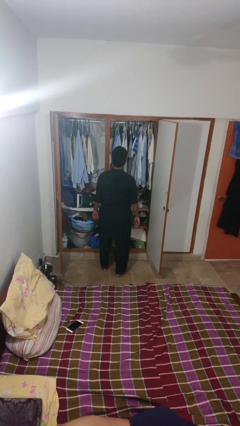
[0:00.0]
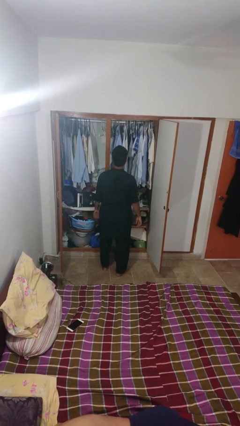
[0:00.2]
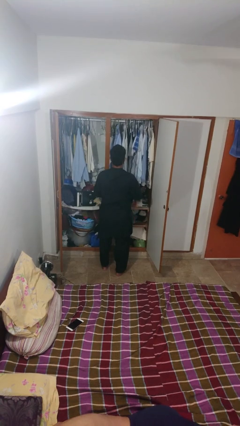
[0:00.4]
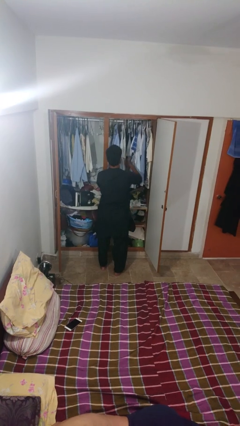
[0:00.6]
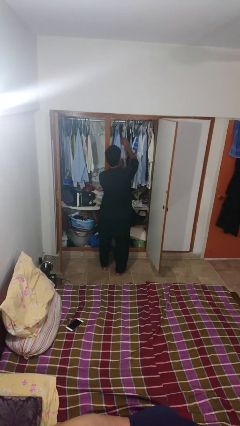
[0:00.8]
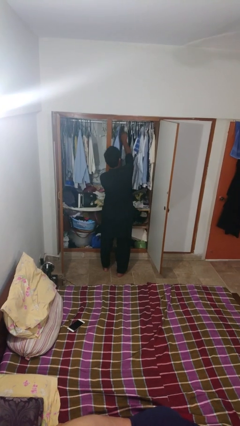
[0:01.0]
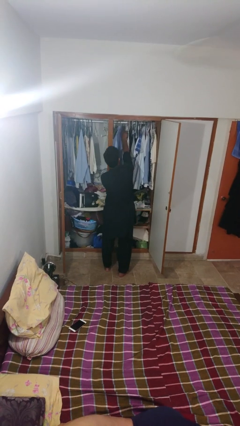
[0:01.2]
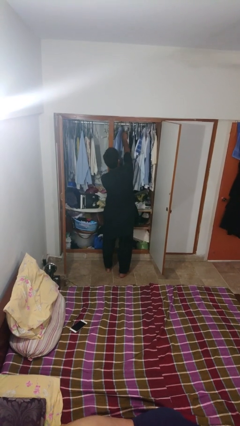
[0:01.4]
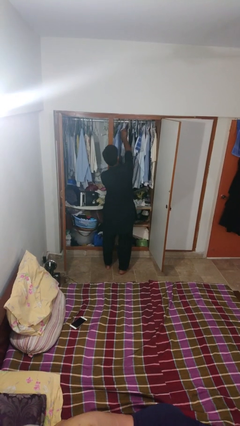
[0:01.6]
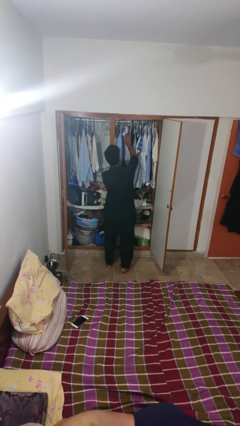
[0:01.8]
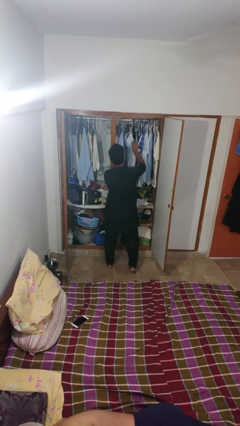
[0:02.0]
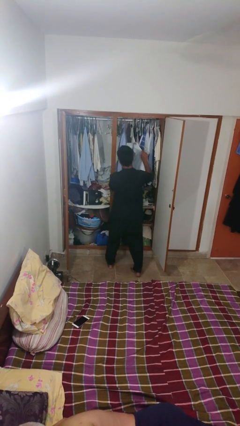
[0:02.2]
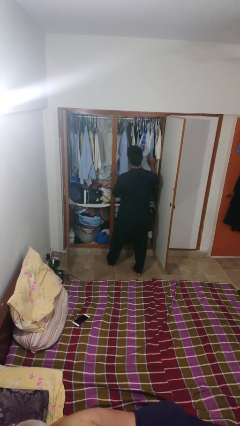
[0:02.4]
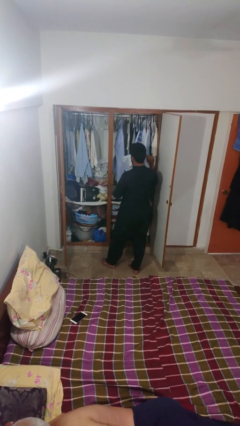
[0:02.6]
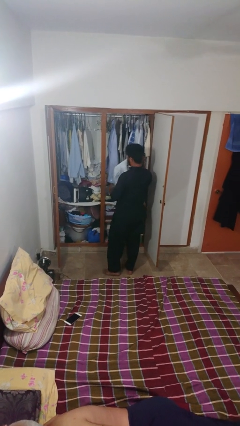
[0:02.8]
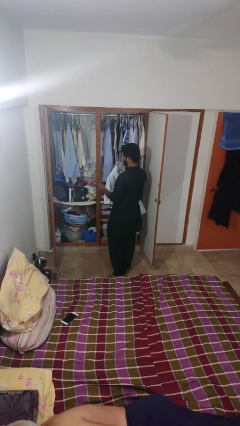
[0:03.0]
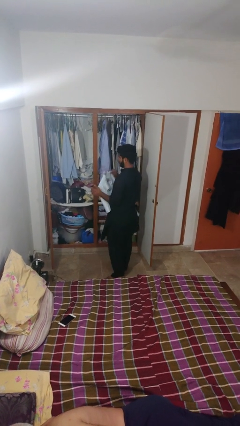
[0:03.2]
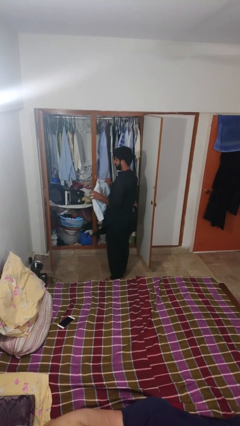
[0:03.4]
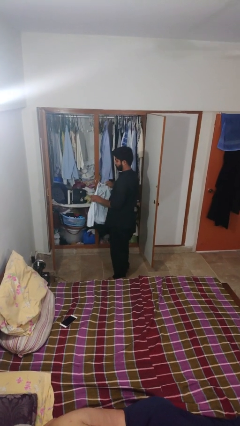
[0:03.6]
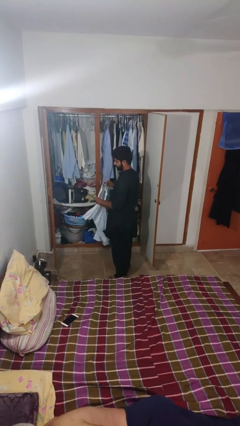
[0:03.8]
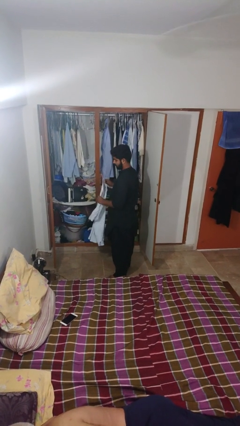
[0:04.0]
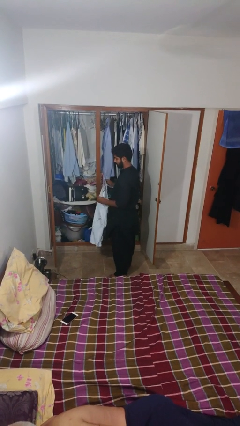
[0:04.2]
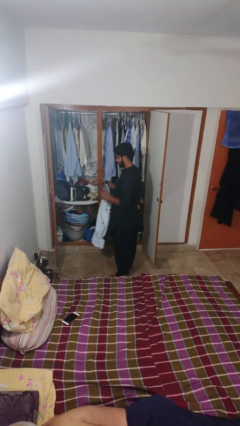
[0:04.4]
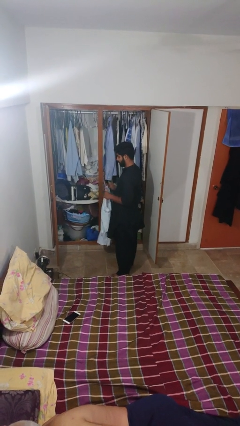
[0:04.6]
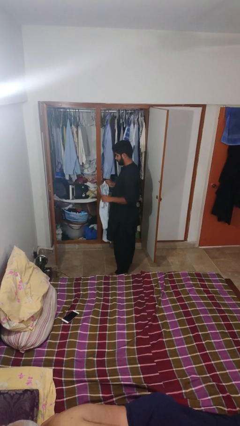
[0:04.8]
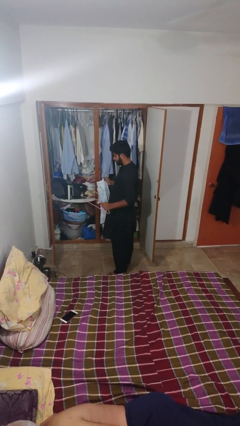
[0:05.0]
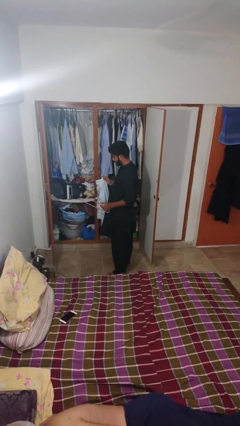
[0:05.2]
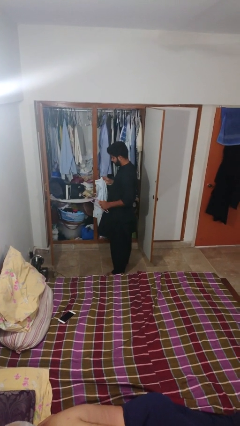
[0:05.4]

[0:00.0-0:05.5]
person takes clothes from closet

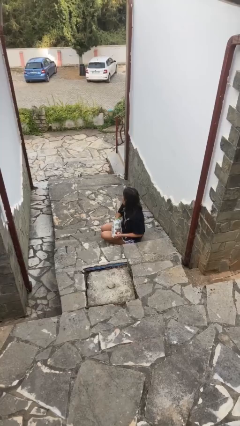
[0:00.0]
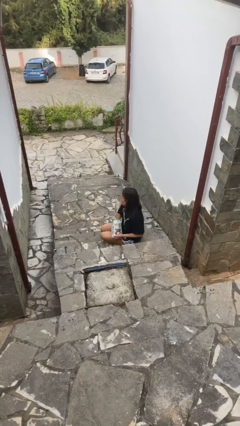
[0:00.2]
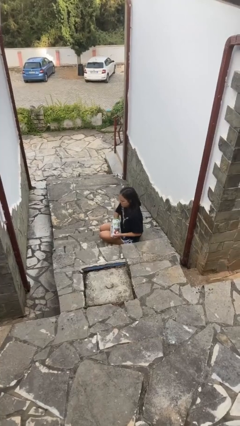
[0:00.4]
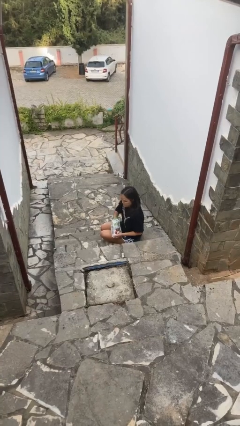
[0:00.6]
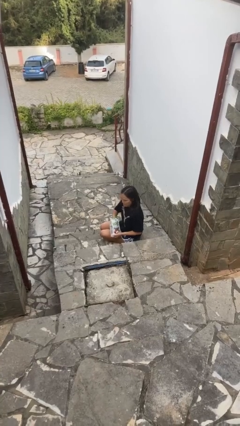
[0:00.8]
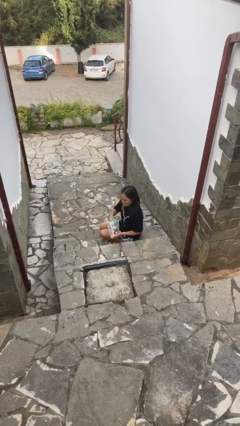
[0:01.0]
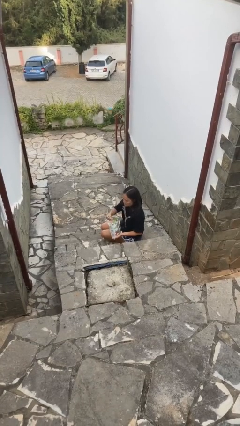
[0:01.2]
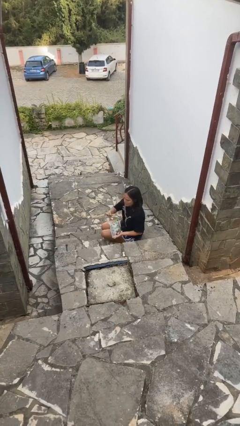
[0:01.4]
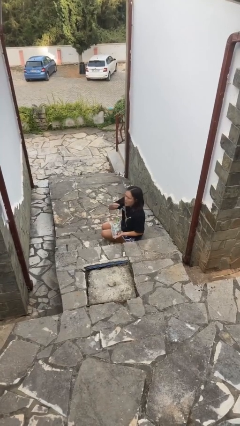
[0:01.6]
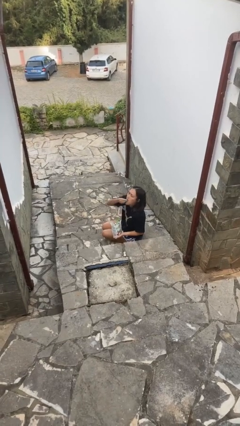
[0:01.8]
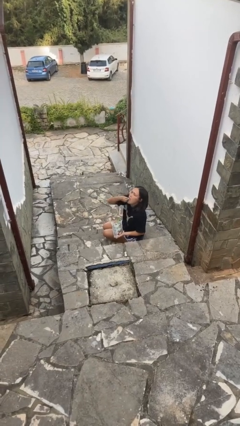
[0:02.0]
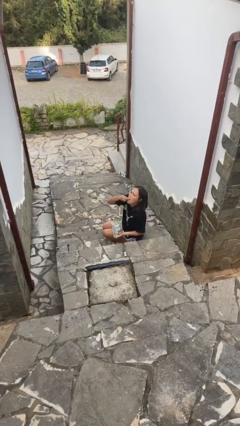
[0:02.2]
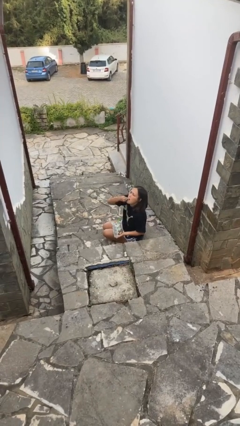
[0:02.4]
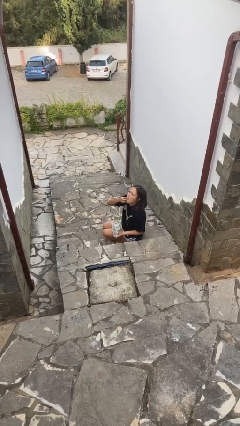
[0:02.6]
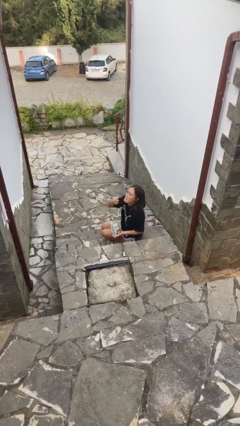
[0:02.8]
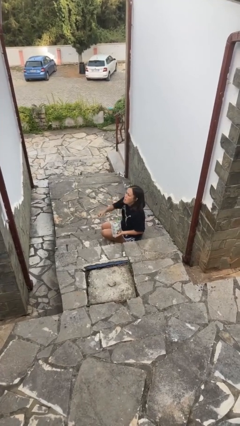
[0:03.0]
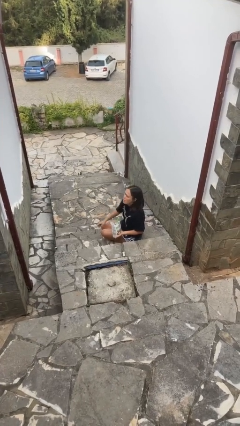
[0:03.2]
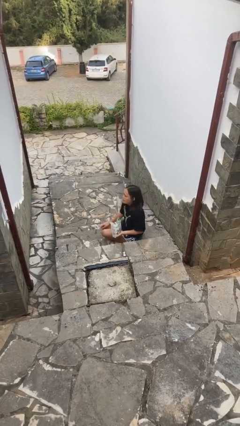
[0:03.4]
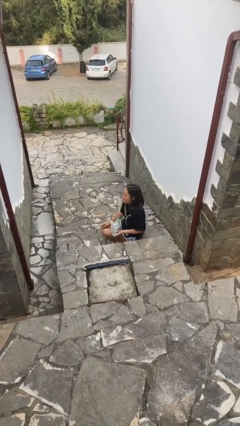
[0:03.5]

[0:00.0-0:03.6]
person eats snack from bag

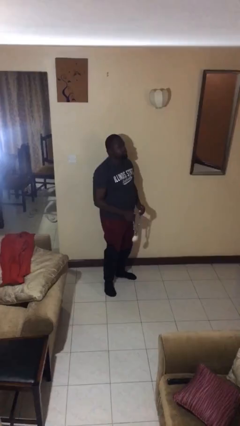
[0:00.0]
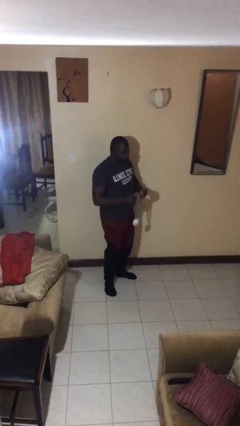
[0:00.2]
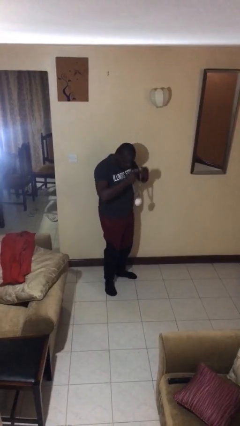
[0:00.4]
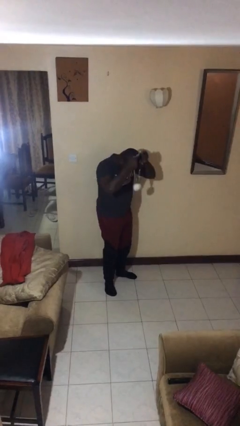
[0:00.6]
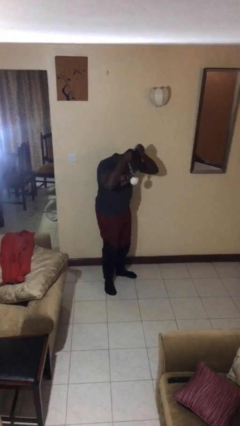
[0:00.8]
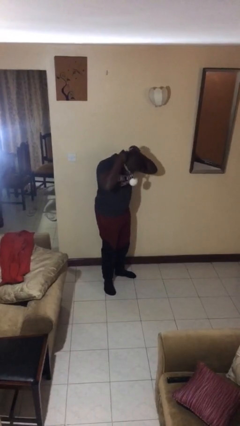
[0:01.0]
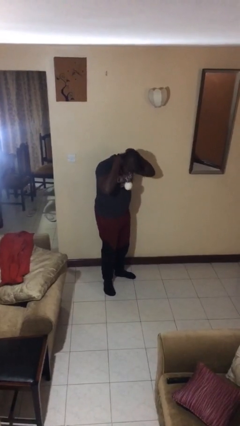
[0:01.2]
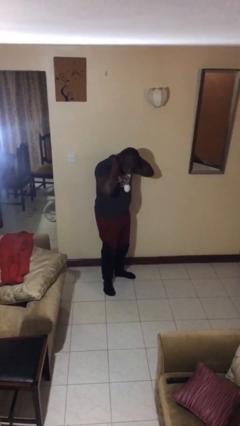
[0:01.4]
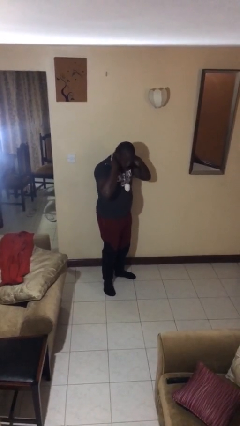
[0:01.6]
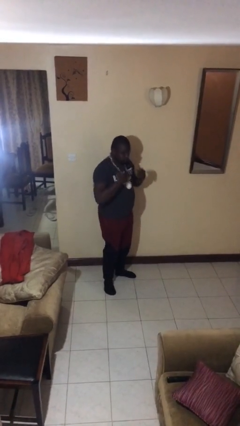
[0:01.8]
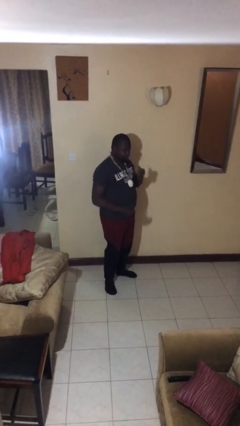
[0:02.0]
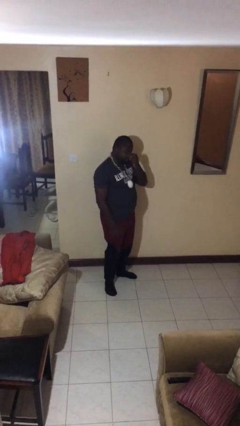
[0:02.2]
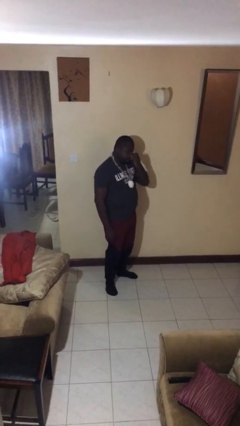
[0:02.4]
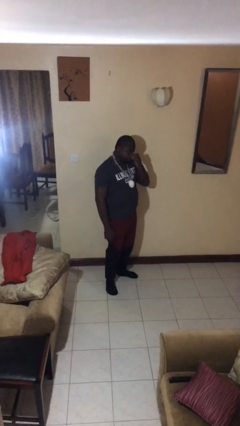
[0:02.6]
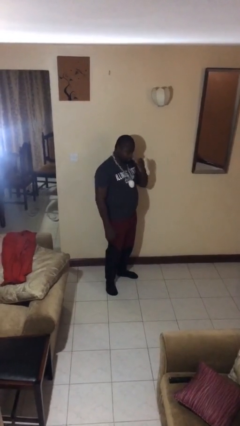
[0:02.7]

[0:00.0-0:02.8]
person puts on necklace

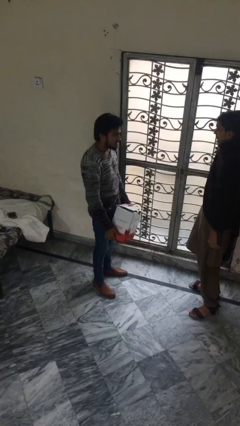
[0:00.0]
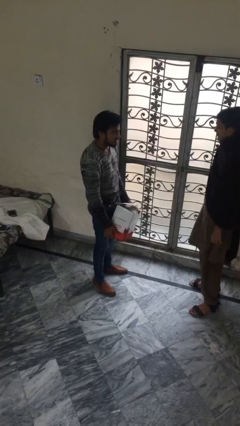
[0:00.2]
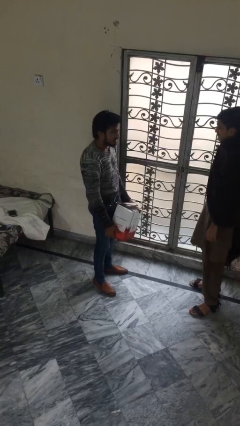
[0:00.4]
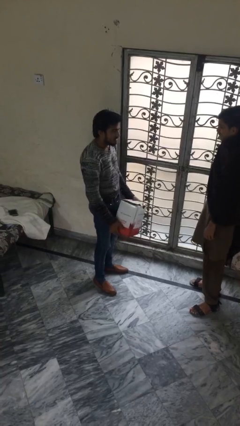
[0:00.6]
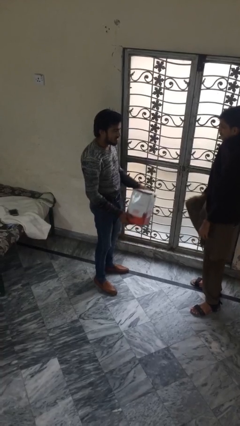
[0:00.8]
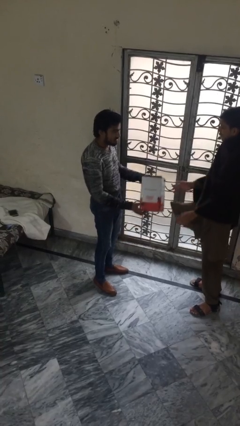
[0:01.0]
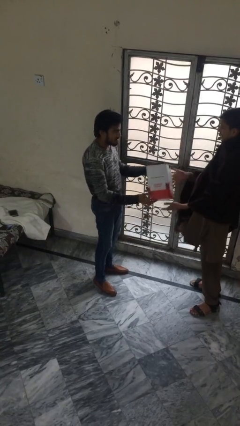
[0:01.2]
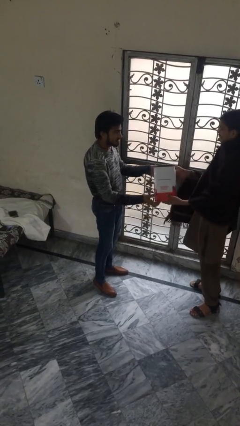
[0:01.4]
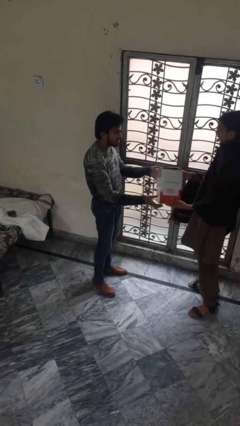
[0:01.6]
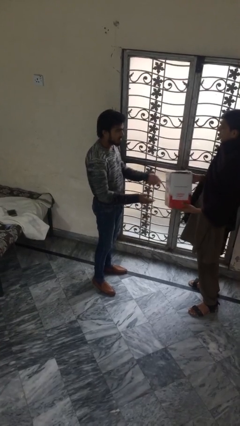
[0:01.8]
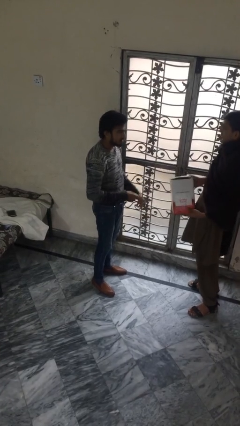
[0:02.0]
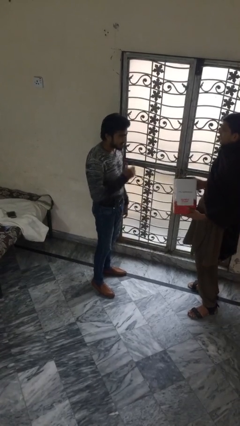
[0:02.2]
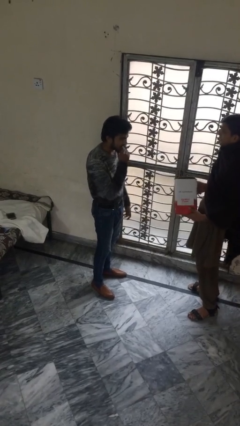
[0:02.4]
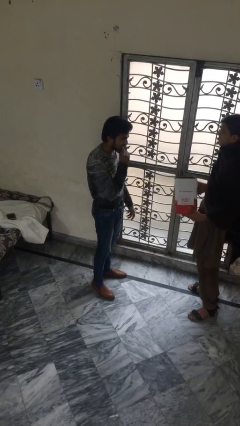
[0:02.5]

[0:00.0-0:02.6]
person transfers object to person

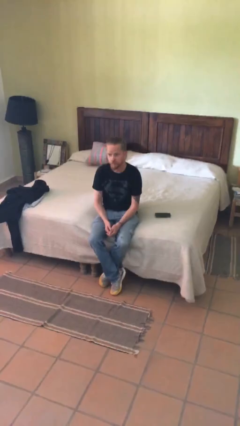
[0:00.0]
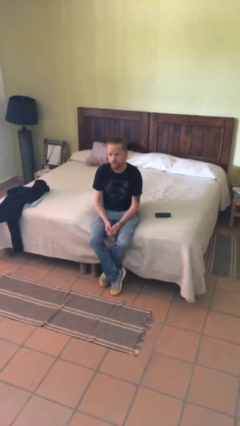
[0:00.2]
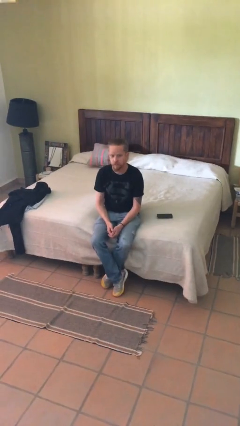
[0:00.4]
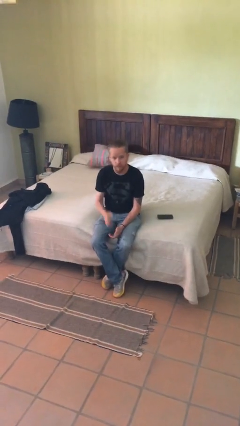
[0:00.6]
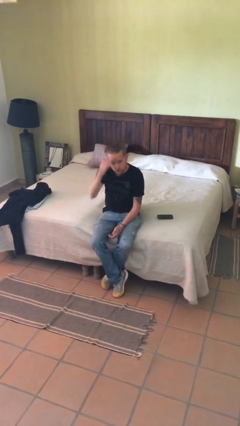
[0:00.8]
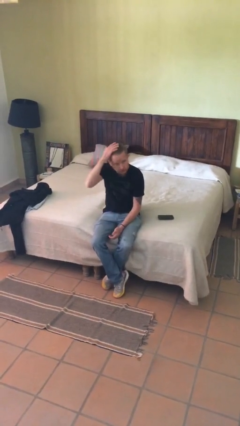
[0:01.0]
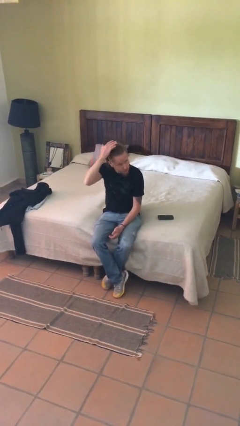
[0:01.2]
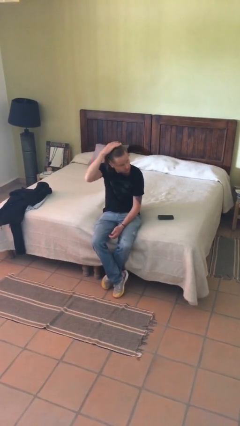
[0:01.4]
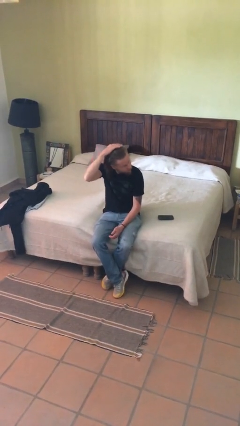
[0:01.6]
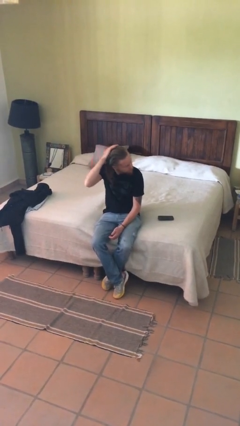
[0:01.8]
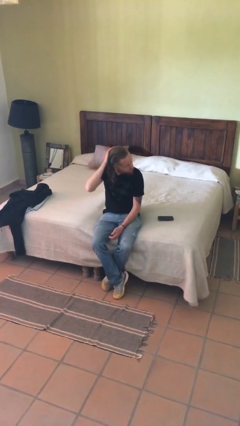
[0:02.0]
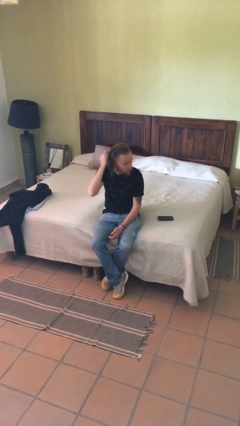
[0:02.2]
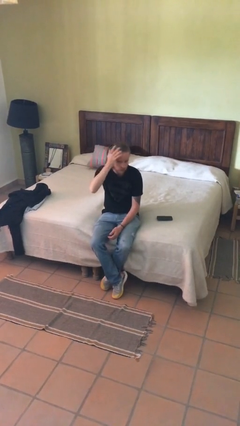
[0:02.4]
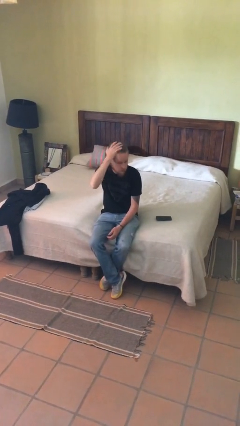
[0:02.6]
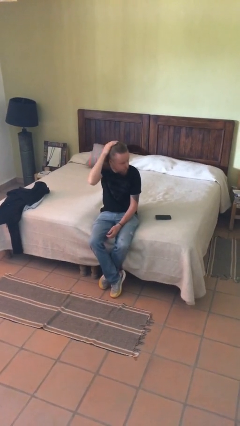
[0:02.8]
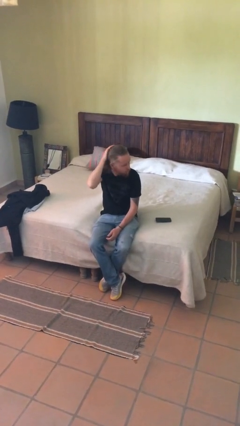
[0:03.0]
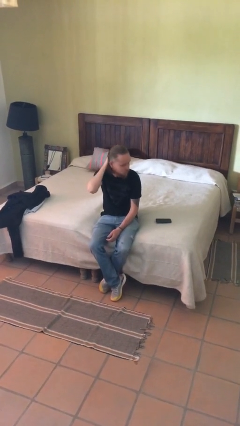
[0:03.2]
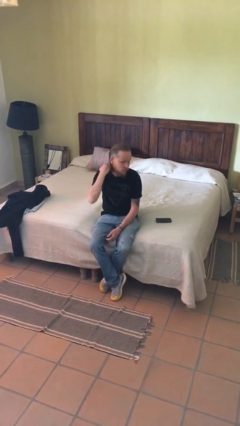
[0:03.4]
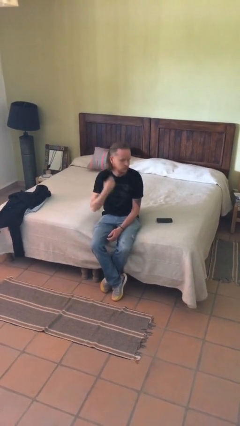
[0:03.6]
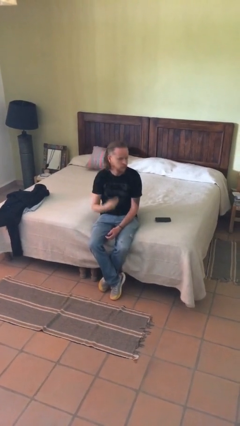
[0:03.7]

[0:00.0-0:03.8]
person strokes hair
